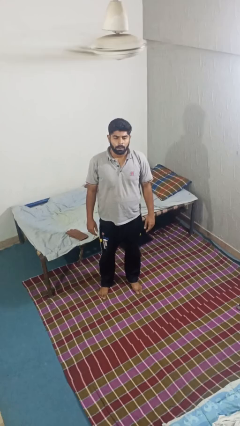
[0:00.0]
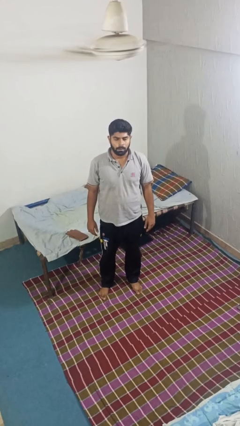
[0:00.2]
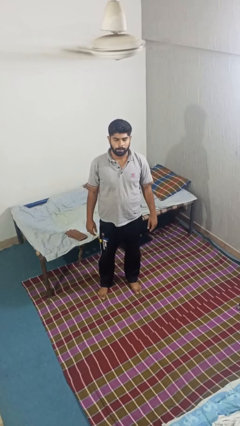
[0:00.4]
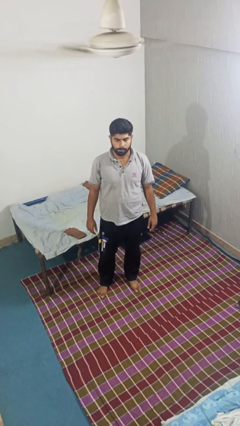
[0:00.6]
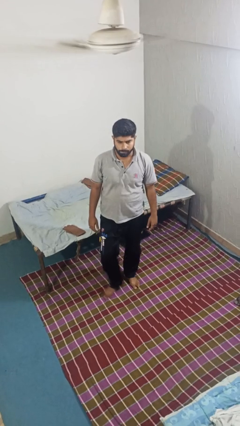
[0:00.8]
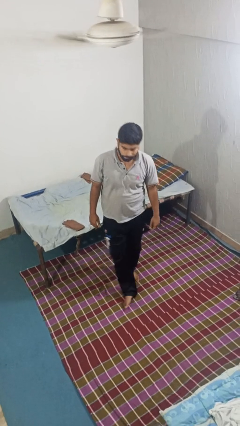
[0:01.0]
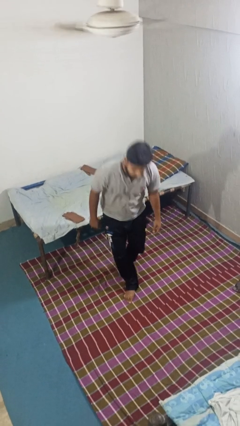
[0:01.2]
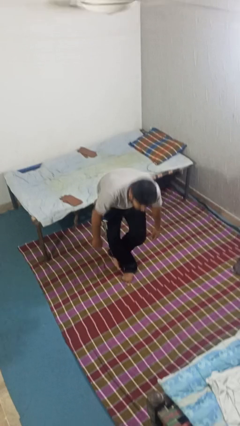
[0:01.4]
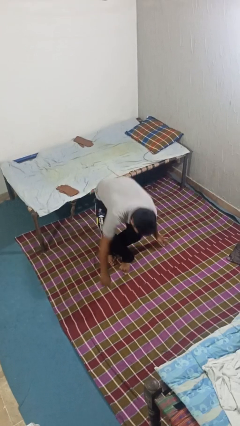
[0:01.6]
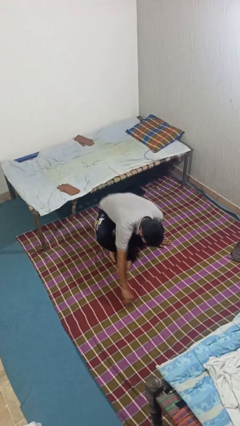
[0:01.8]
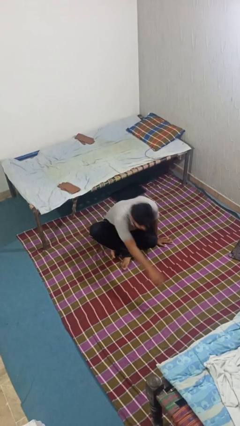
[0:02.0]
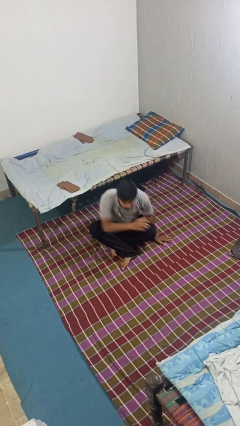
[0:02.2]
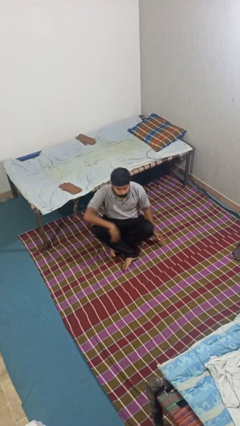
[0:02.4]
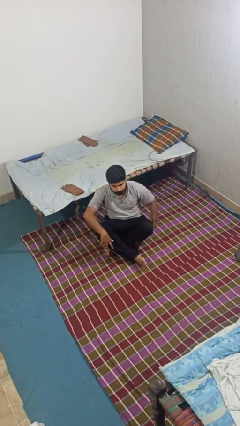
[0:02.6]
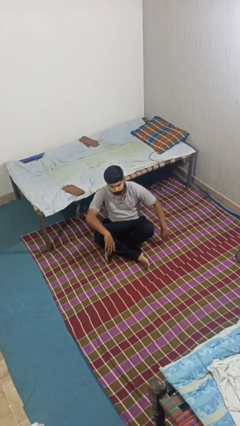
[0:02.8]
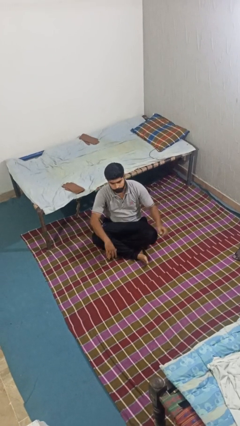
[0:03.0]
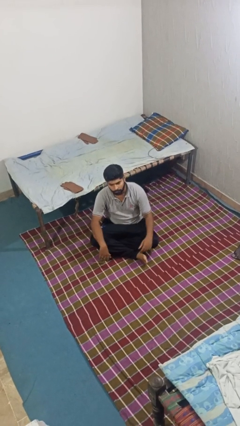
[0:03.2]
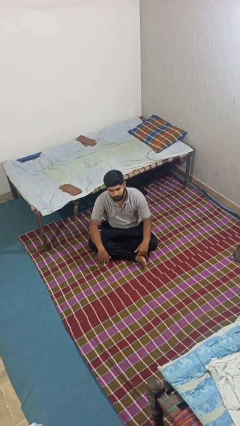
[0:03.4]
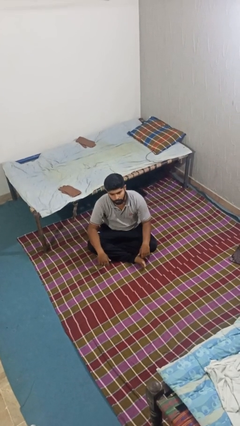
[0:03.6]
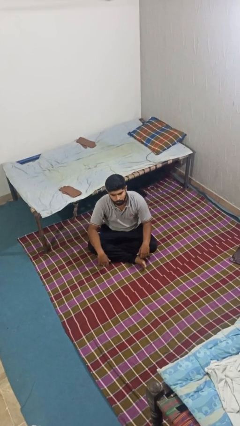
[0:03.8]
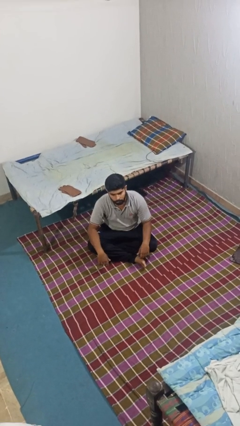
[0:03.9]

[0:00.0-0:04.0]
person sits crisscross

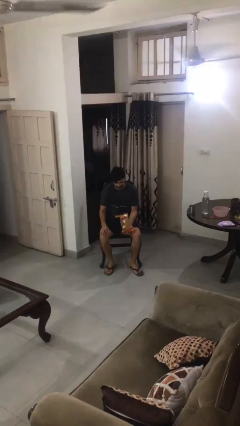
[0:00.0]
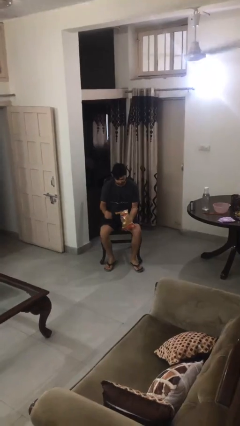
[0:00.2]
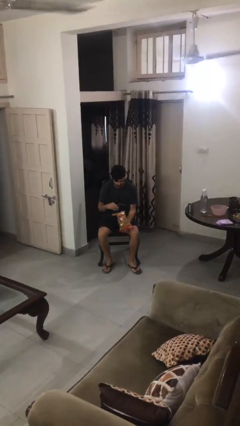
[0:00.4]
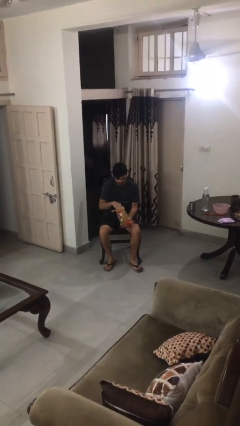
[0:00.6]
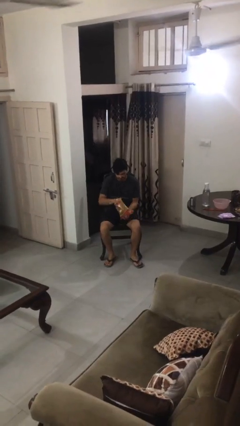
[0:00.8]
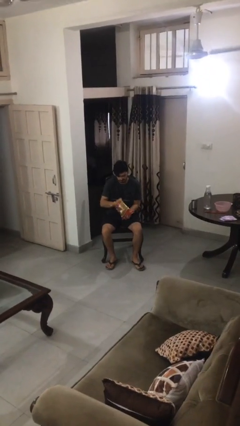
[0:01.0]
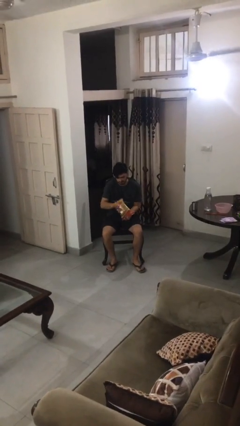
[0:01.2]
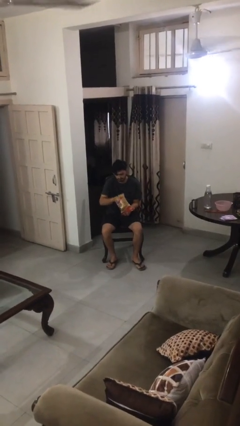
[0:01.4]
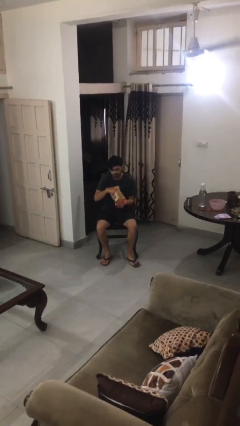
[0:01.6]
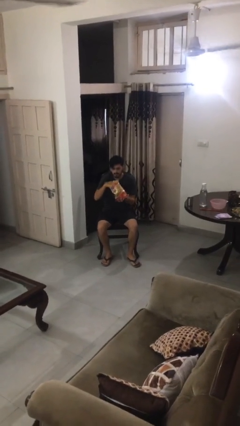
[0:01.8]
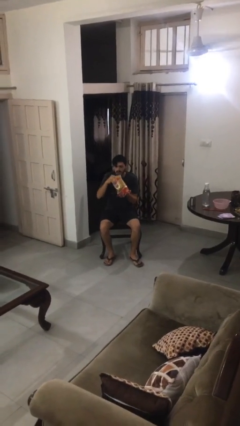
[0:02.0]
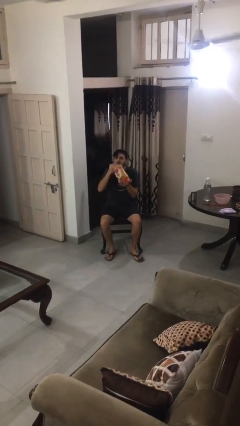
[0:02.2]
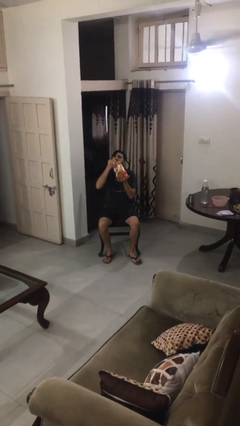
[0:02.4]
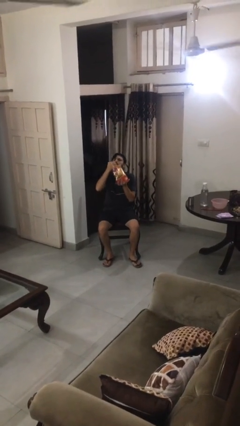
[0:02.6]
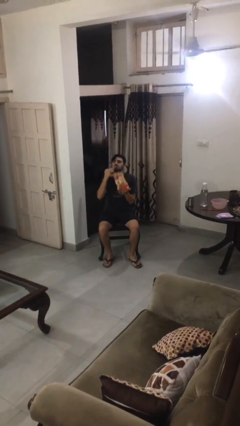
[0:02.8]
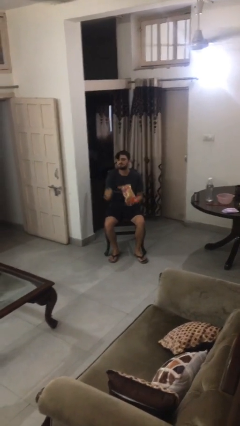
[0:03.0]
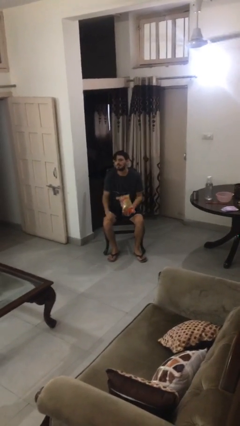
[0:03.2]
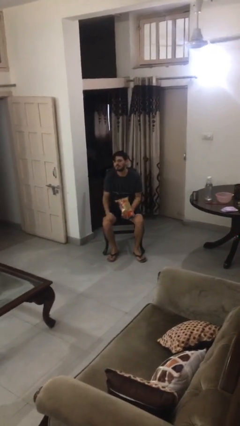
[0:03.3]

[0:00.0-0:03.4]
person eats snack from bag

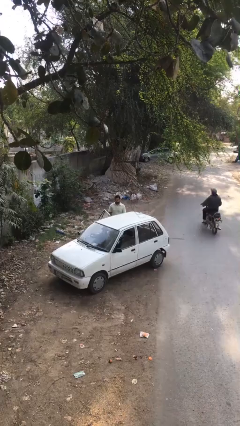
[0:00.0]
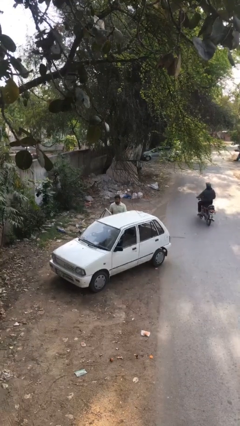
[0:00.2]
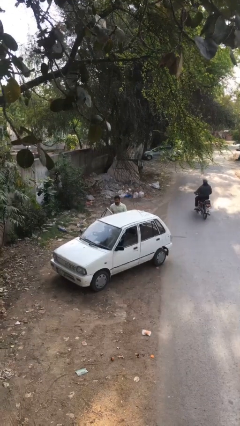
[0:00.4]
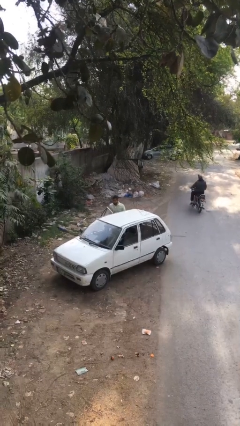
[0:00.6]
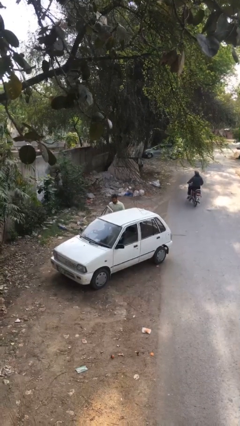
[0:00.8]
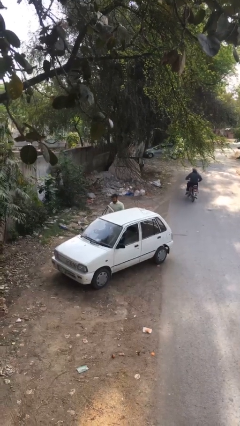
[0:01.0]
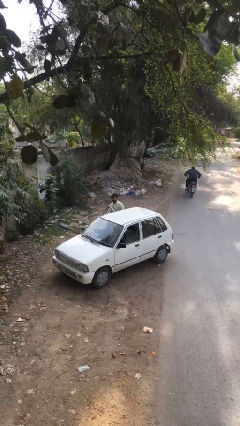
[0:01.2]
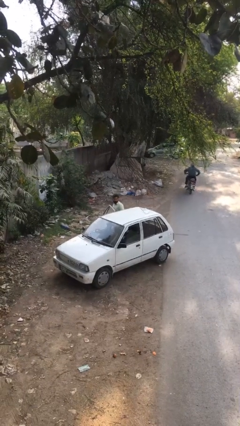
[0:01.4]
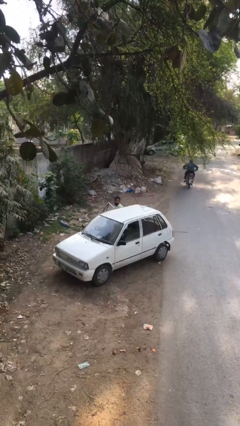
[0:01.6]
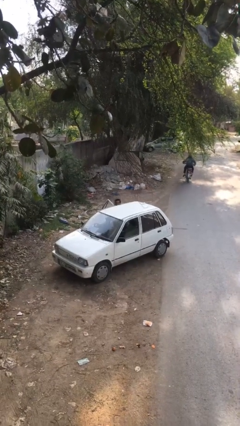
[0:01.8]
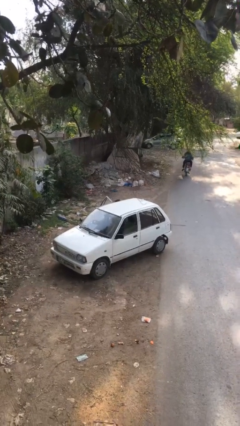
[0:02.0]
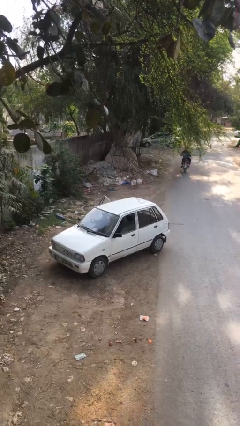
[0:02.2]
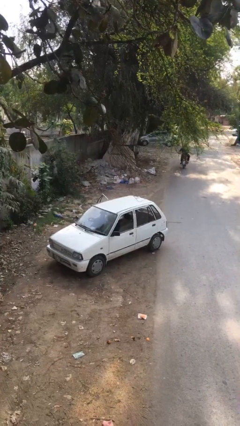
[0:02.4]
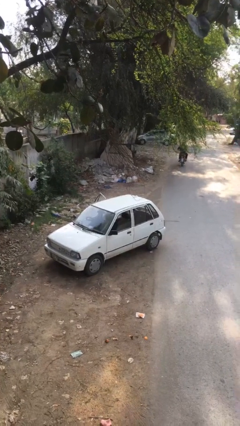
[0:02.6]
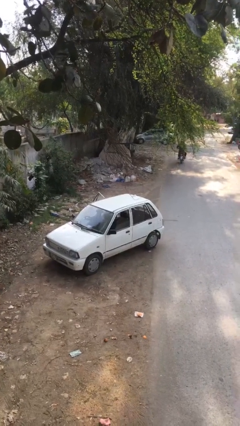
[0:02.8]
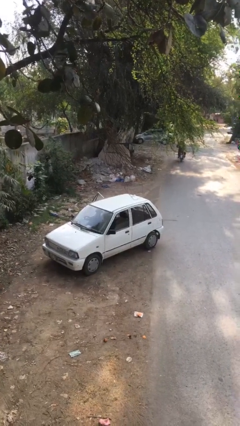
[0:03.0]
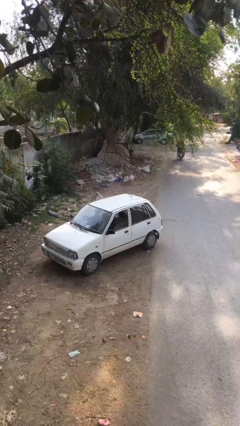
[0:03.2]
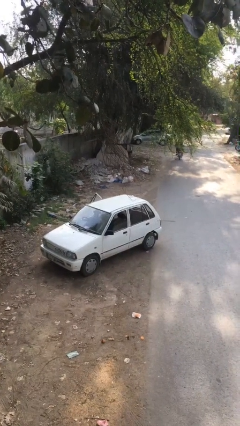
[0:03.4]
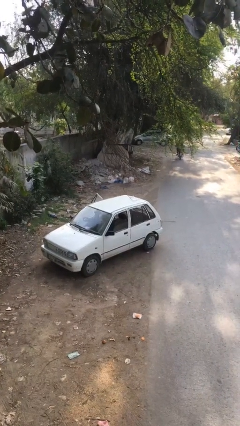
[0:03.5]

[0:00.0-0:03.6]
person enters car

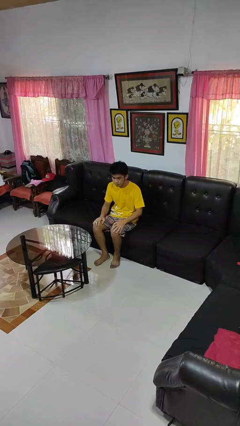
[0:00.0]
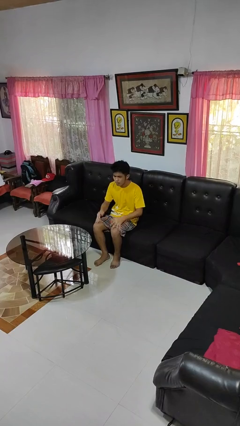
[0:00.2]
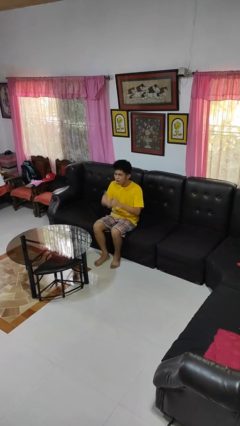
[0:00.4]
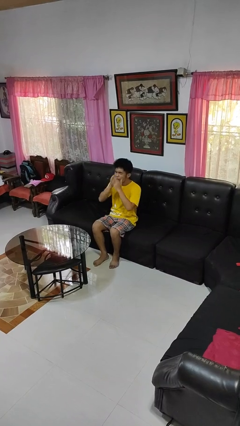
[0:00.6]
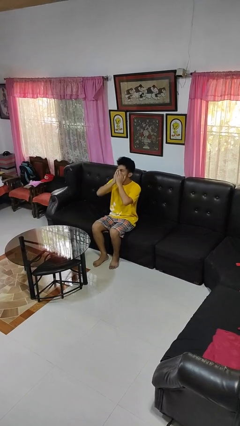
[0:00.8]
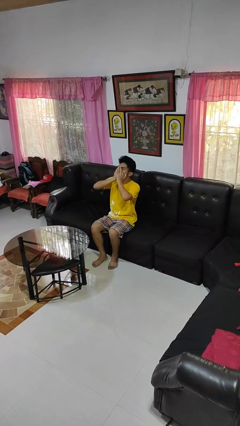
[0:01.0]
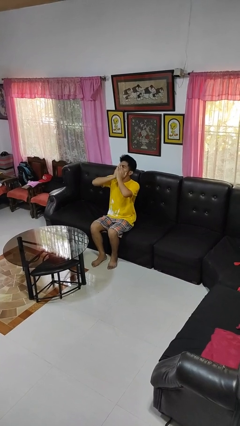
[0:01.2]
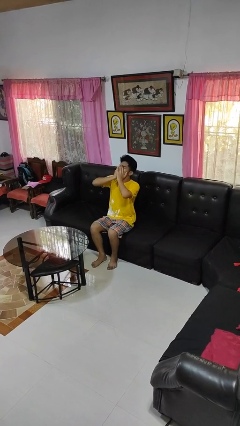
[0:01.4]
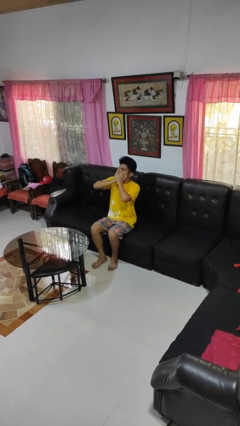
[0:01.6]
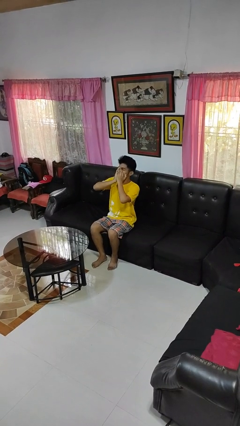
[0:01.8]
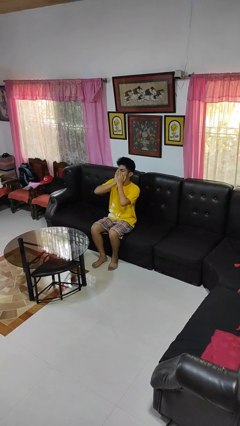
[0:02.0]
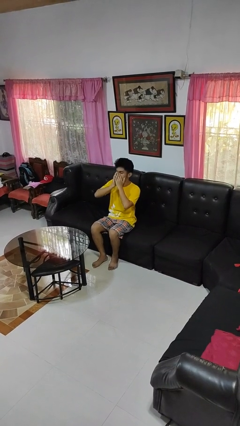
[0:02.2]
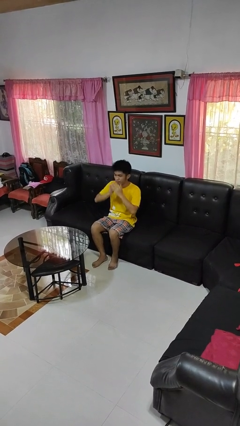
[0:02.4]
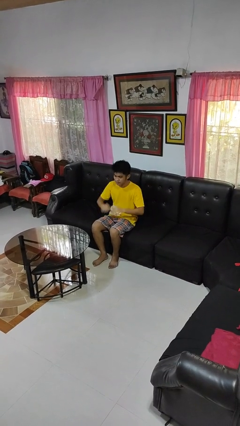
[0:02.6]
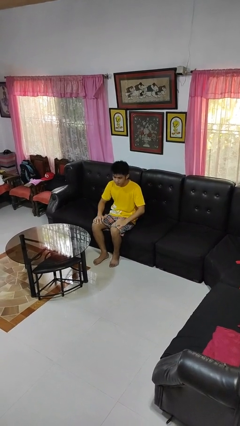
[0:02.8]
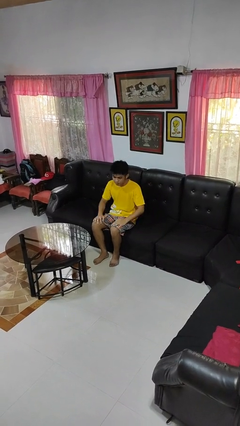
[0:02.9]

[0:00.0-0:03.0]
person yawns

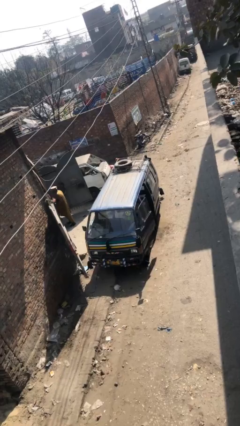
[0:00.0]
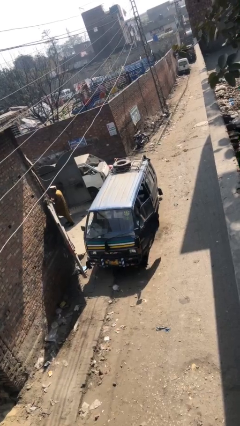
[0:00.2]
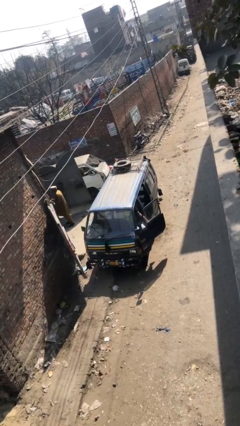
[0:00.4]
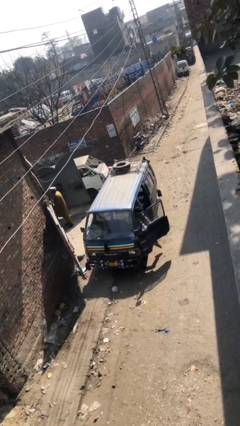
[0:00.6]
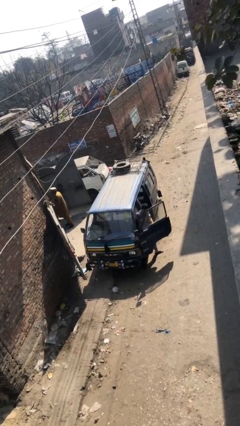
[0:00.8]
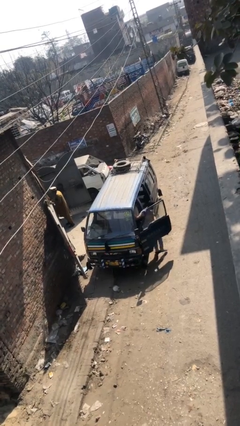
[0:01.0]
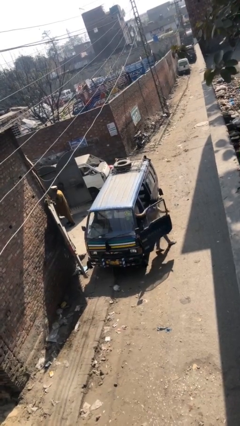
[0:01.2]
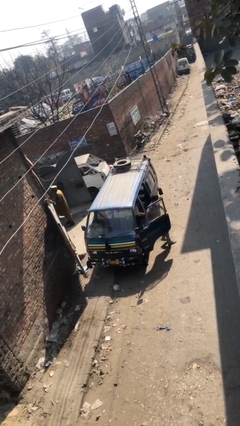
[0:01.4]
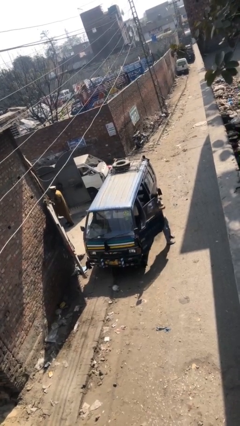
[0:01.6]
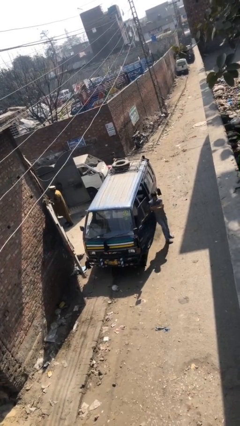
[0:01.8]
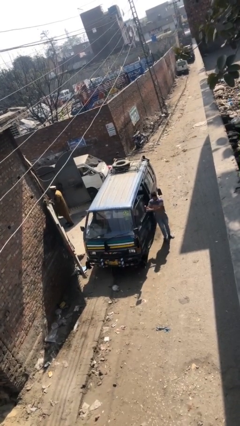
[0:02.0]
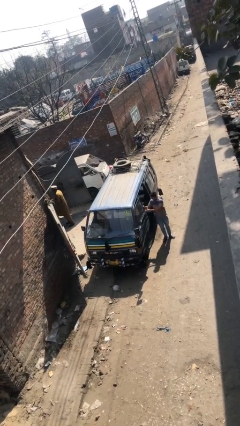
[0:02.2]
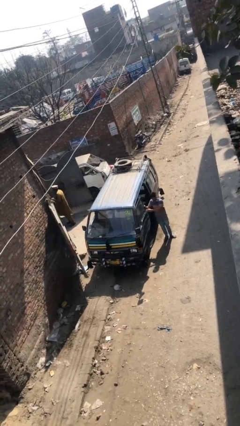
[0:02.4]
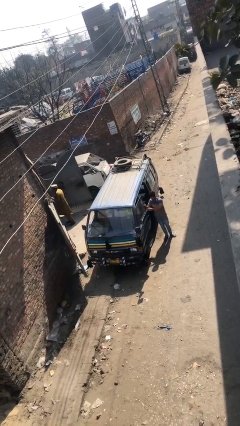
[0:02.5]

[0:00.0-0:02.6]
car drops off person

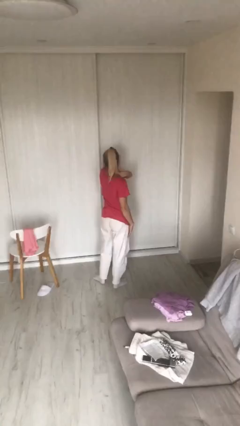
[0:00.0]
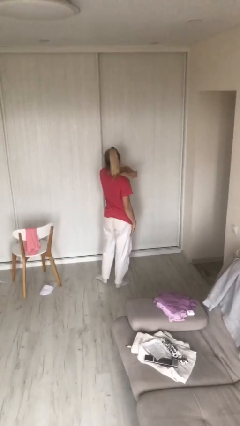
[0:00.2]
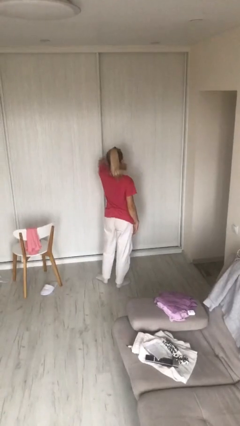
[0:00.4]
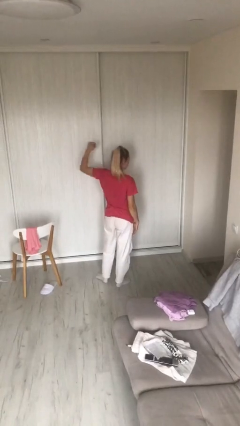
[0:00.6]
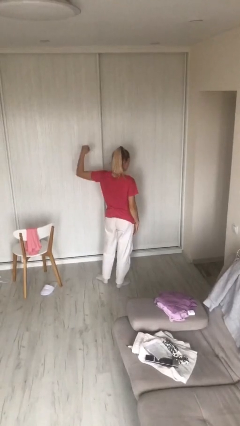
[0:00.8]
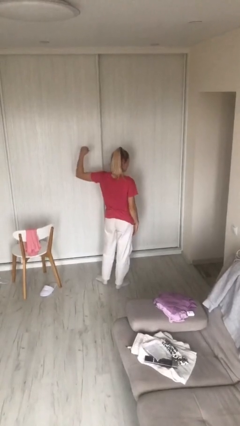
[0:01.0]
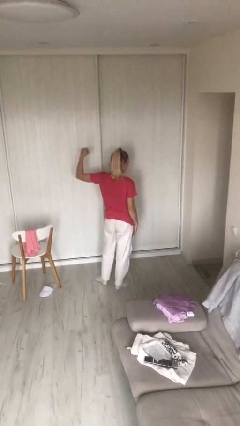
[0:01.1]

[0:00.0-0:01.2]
person gestures cut
